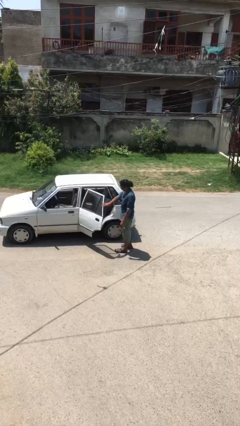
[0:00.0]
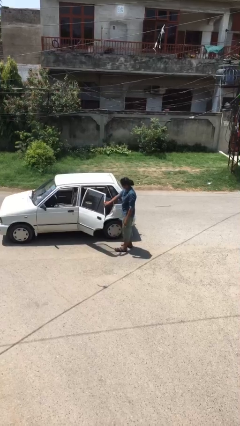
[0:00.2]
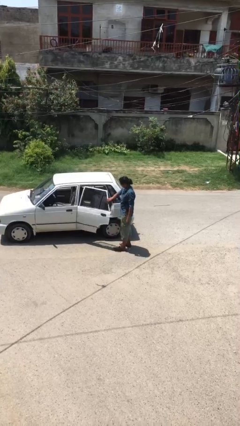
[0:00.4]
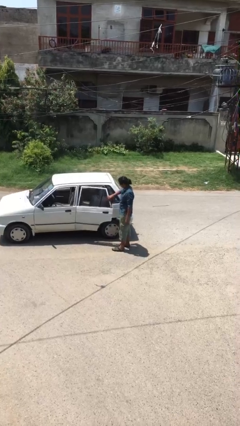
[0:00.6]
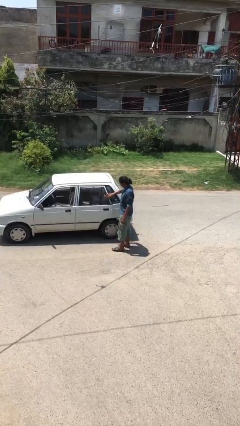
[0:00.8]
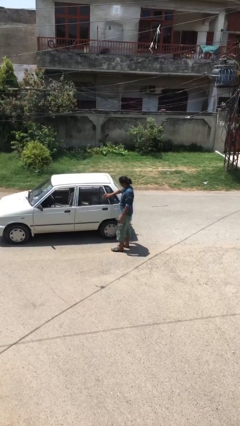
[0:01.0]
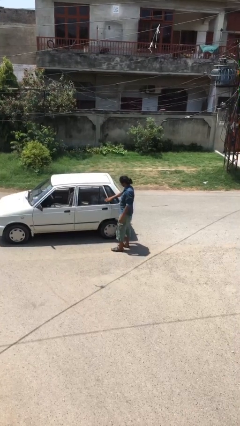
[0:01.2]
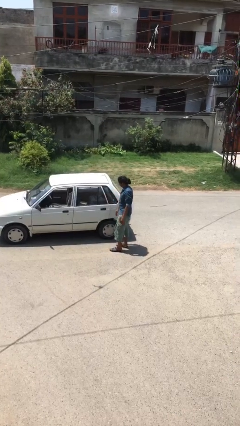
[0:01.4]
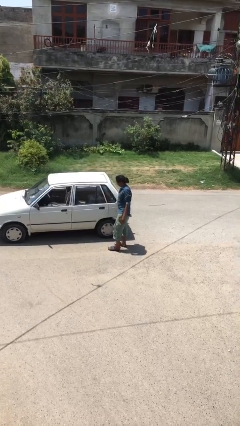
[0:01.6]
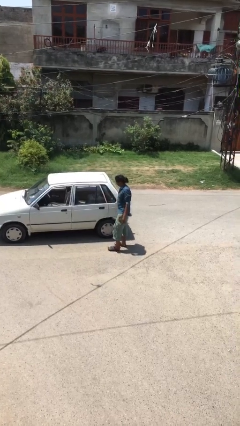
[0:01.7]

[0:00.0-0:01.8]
person closes car door

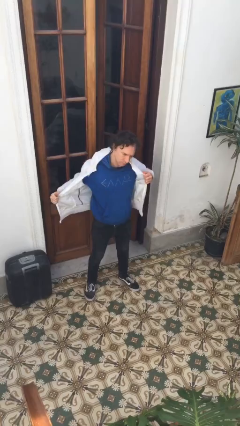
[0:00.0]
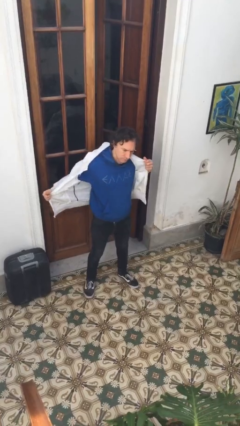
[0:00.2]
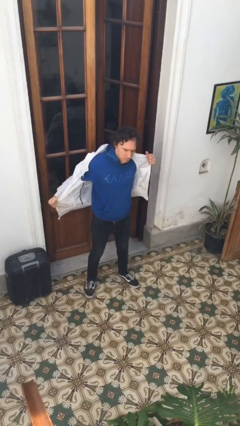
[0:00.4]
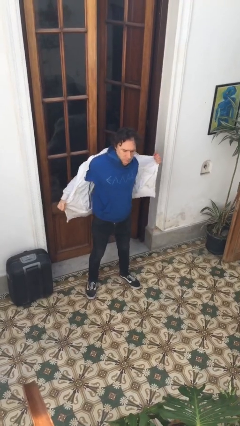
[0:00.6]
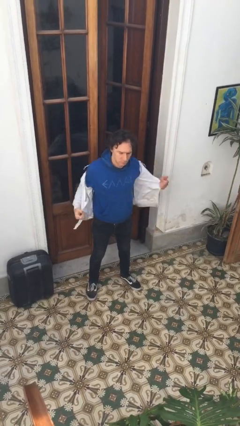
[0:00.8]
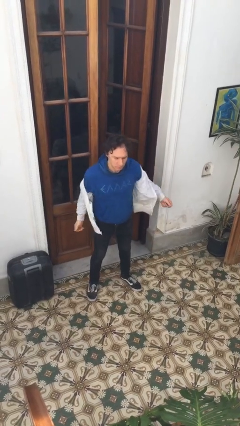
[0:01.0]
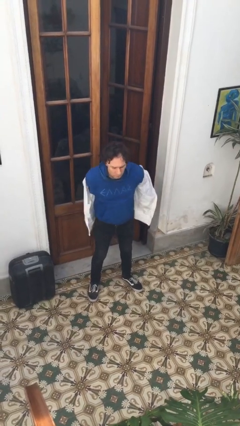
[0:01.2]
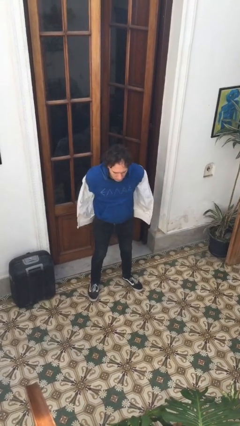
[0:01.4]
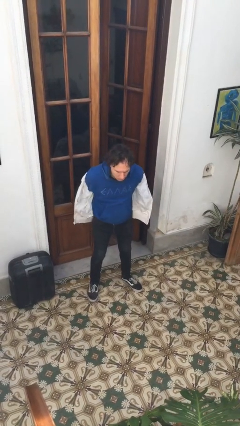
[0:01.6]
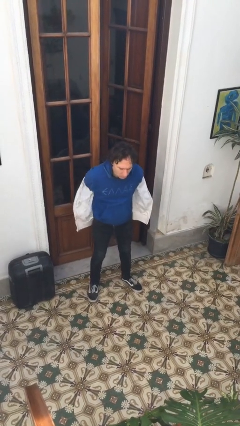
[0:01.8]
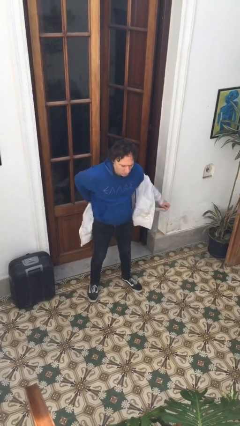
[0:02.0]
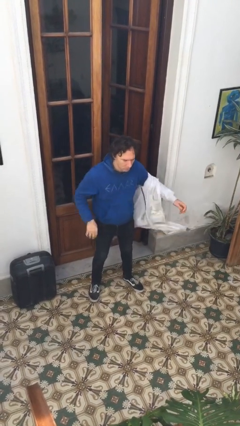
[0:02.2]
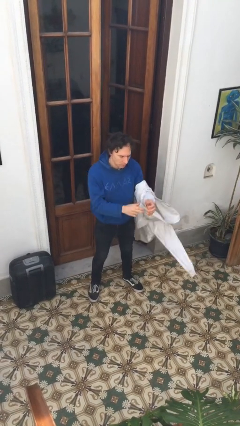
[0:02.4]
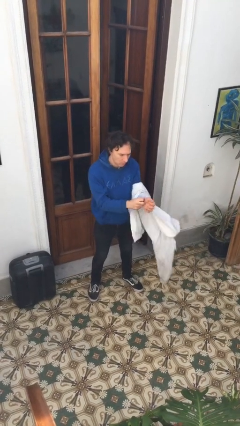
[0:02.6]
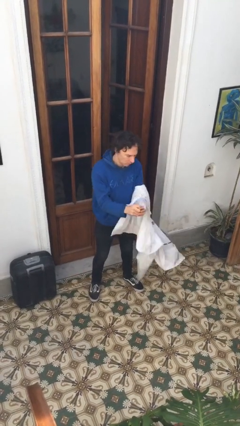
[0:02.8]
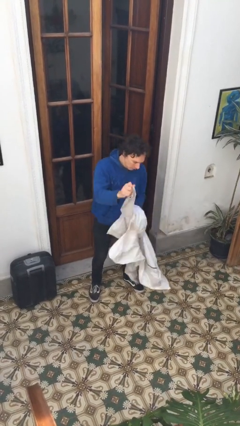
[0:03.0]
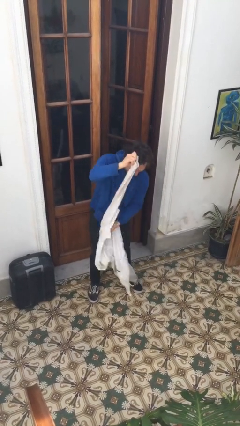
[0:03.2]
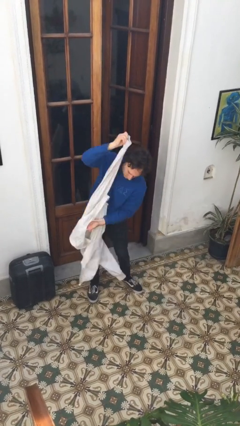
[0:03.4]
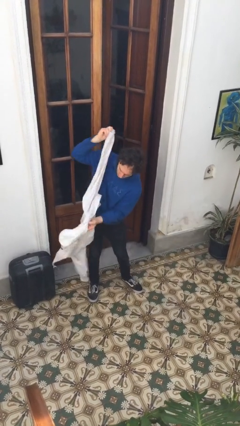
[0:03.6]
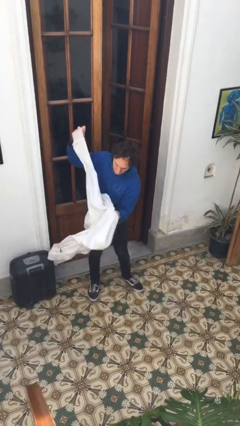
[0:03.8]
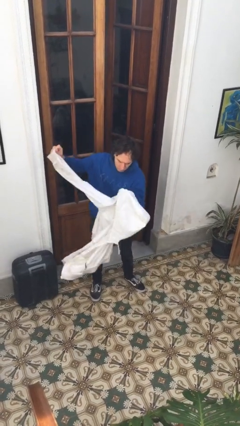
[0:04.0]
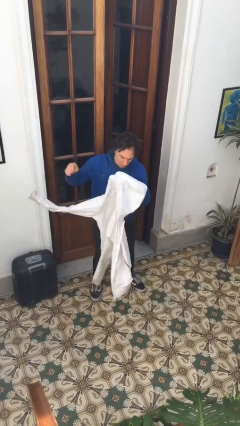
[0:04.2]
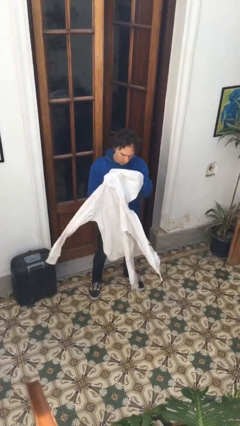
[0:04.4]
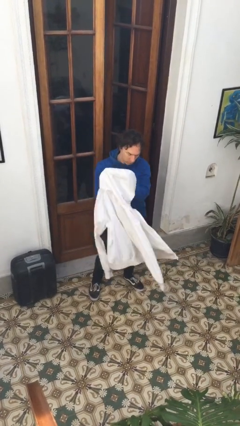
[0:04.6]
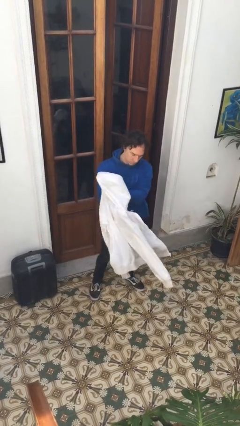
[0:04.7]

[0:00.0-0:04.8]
person takes off jacket

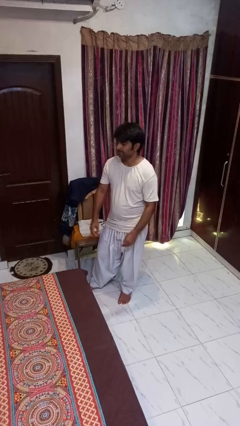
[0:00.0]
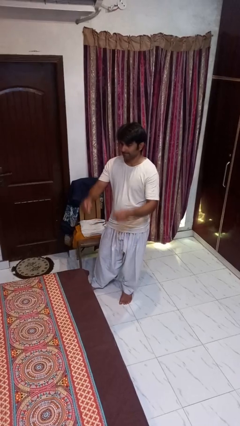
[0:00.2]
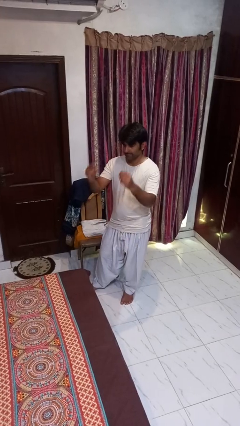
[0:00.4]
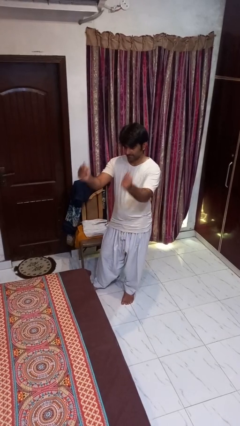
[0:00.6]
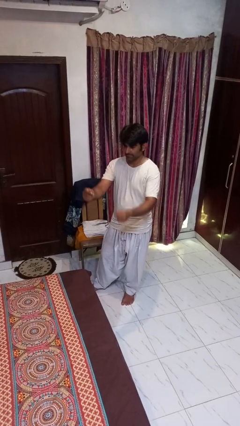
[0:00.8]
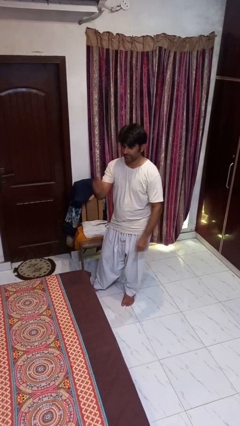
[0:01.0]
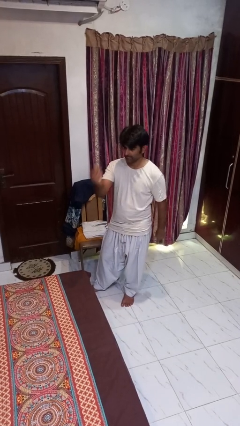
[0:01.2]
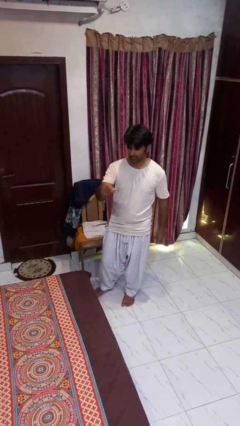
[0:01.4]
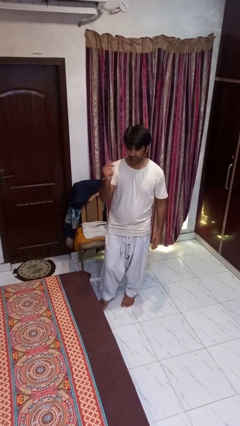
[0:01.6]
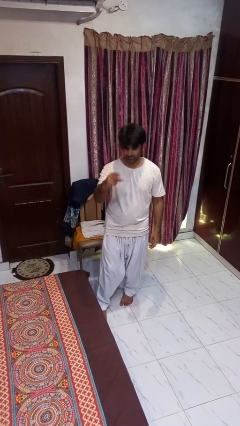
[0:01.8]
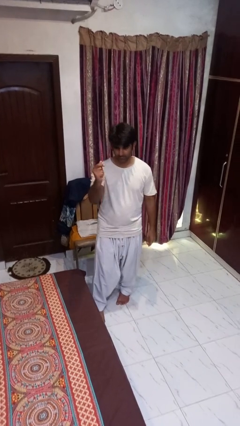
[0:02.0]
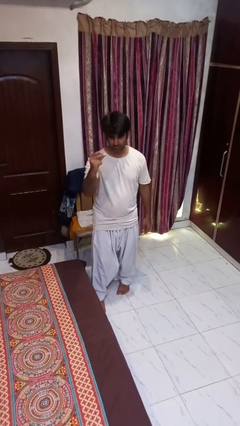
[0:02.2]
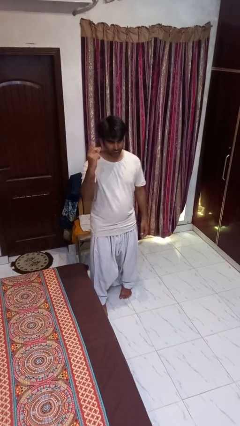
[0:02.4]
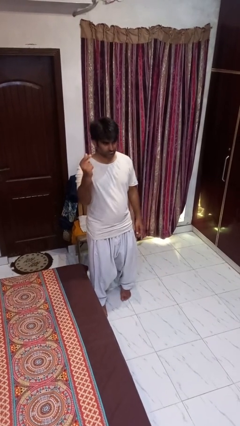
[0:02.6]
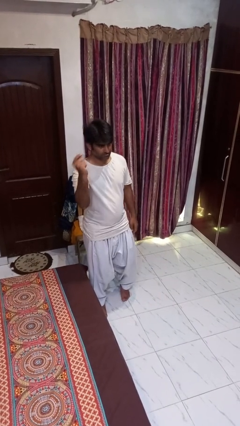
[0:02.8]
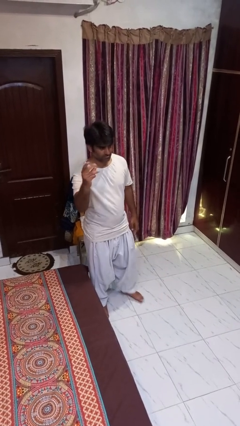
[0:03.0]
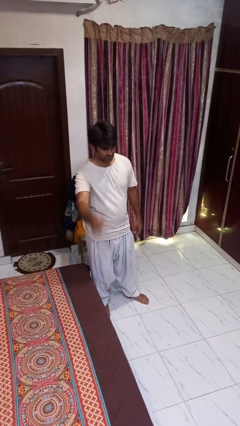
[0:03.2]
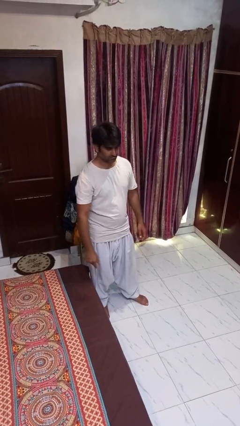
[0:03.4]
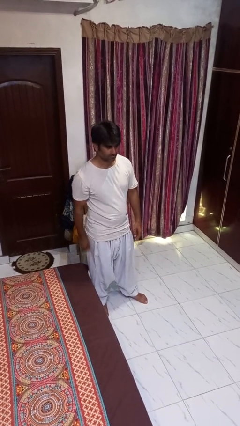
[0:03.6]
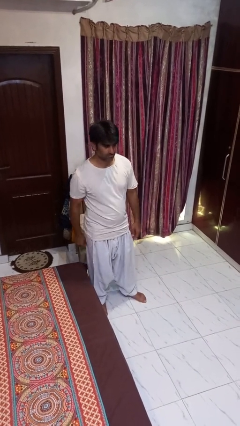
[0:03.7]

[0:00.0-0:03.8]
person snaps fingers

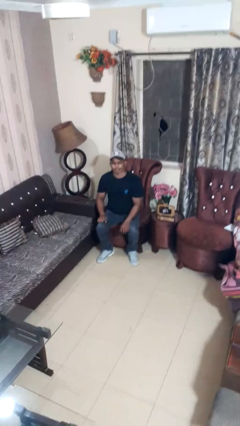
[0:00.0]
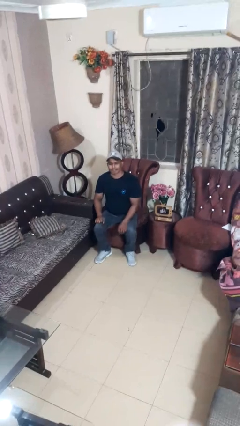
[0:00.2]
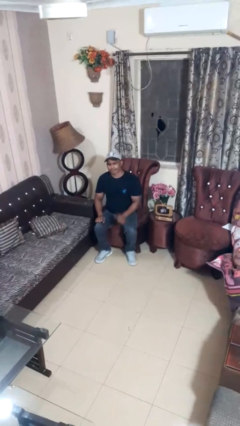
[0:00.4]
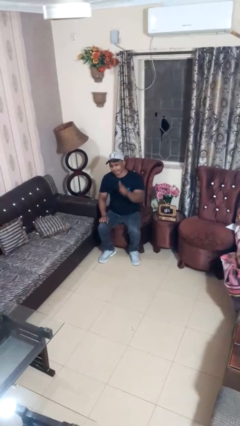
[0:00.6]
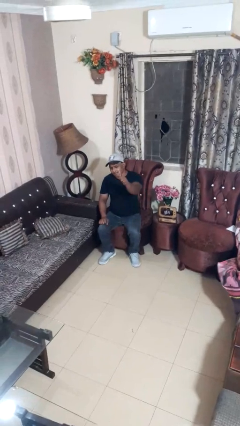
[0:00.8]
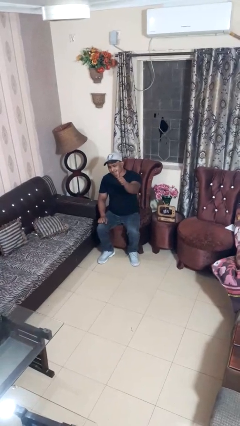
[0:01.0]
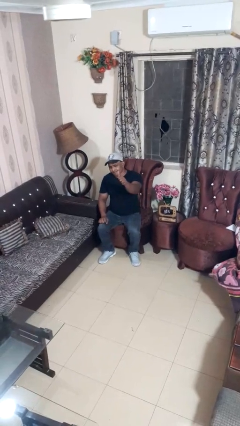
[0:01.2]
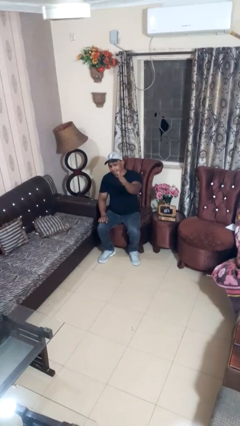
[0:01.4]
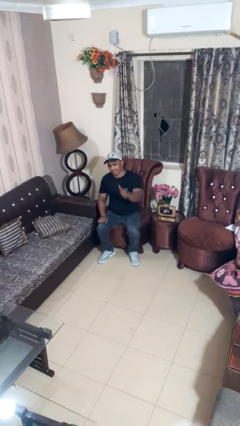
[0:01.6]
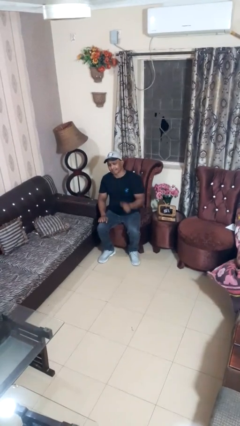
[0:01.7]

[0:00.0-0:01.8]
person gestures thumbs up

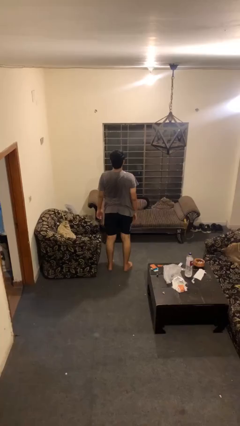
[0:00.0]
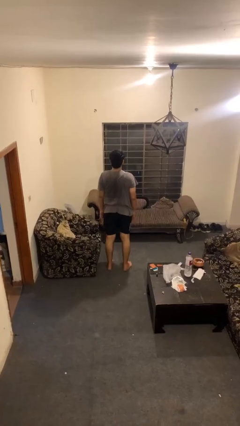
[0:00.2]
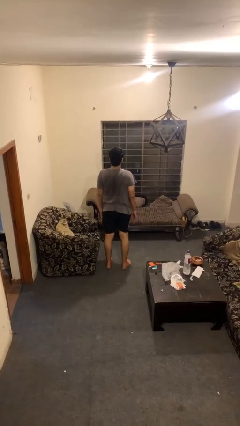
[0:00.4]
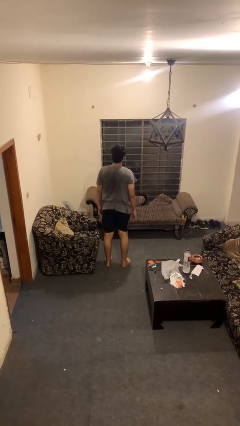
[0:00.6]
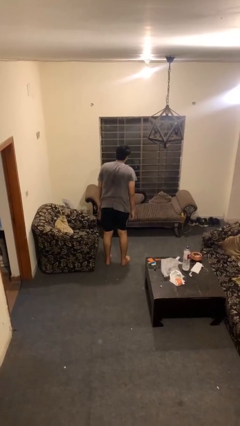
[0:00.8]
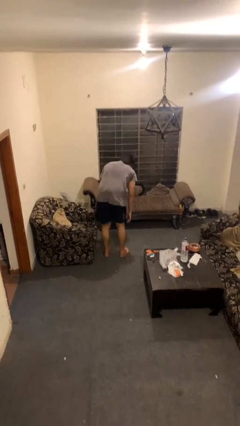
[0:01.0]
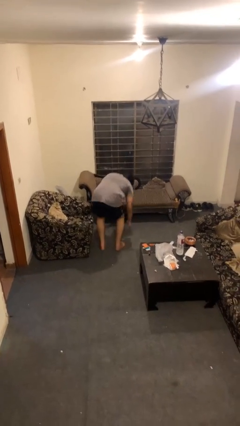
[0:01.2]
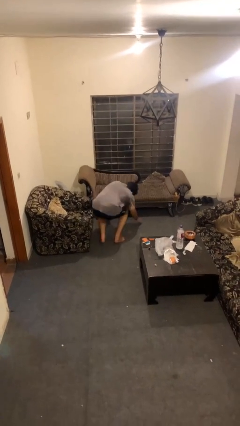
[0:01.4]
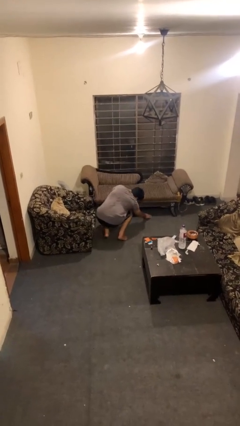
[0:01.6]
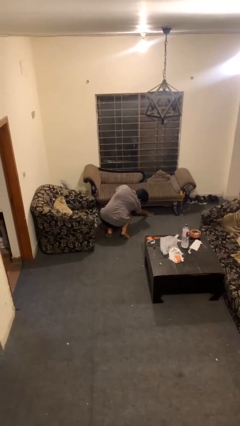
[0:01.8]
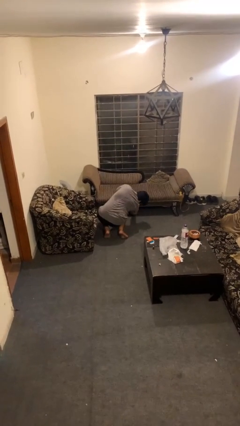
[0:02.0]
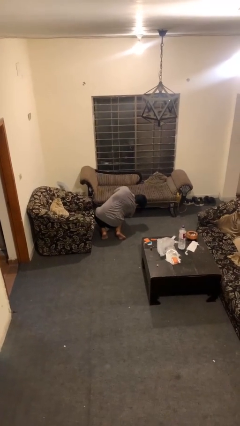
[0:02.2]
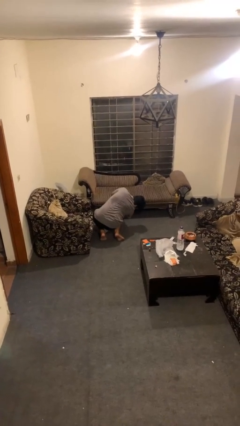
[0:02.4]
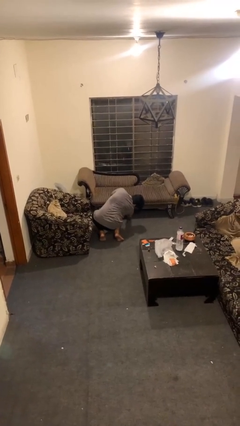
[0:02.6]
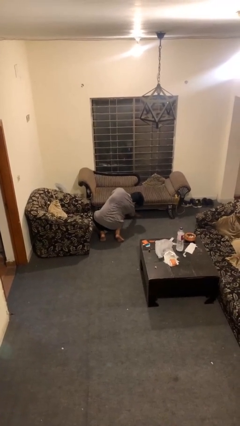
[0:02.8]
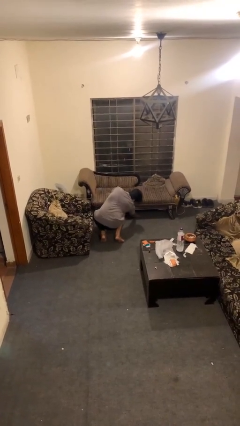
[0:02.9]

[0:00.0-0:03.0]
person searches under couch

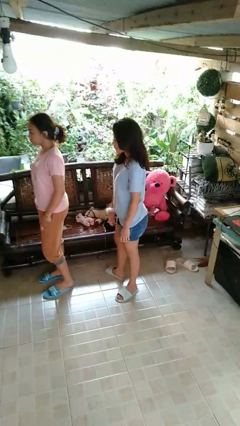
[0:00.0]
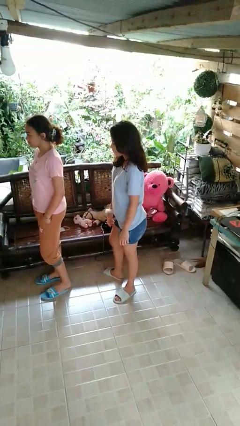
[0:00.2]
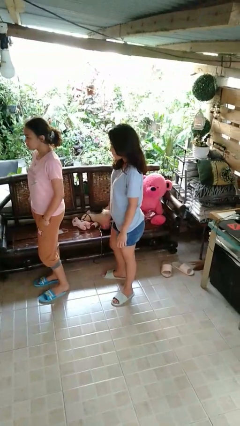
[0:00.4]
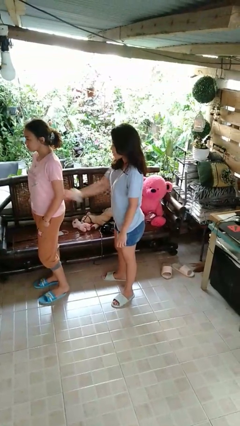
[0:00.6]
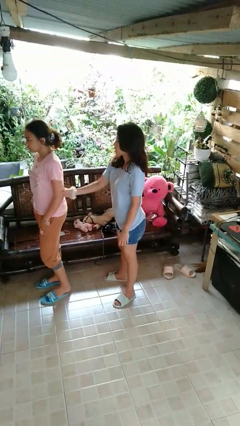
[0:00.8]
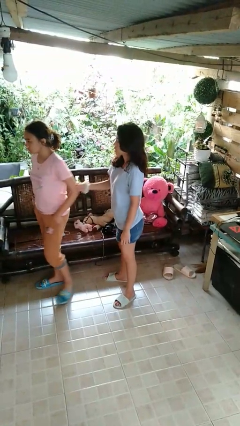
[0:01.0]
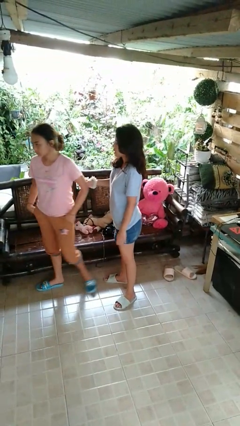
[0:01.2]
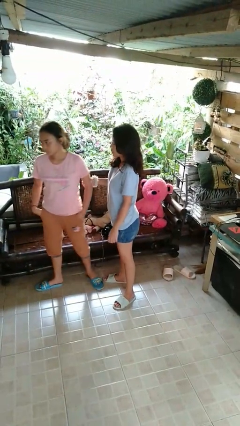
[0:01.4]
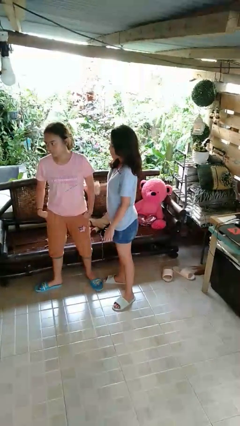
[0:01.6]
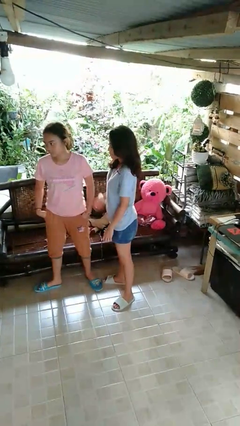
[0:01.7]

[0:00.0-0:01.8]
person grabs person by bicep

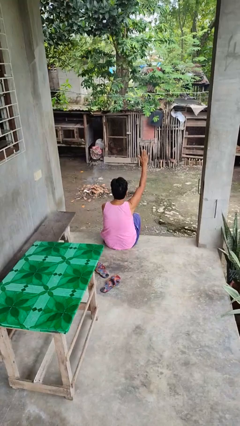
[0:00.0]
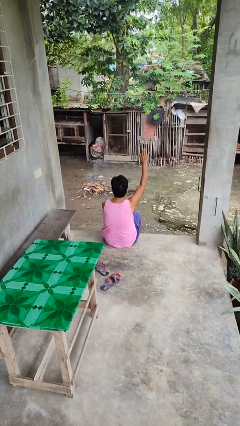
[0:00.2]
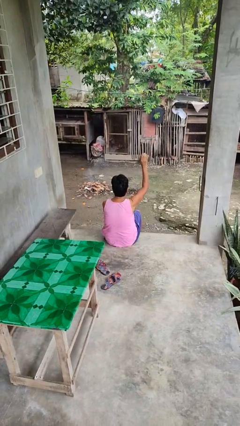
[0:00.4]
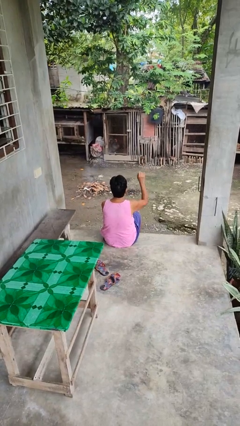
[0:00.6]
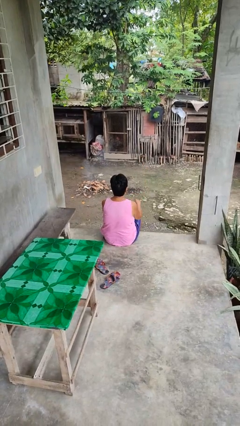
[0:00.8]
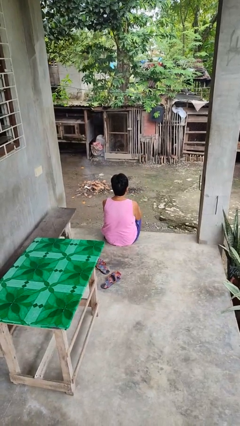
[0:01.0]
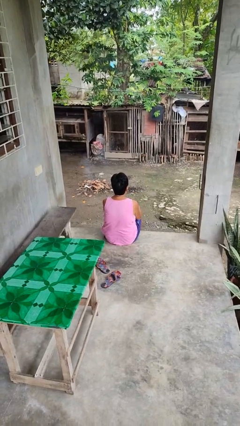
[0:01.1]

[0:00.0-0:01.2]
person gestures lower hand
